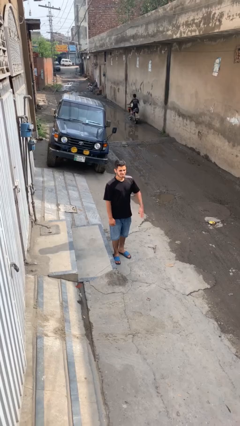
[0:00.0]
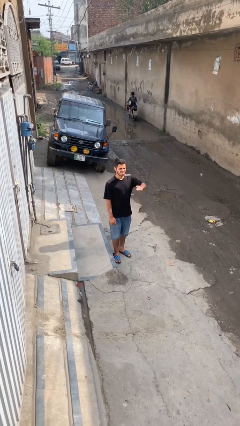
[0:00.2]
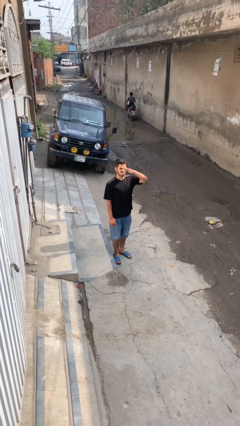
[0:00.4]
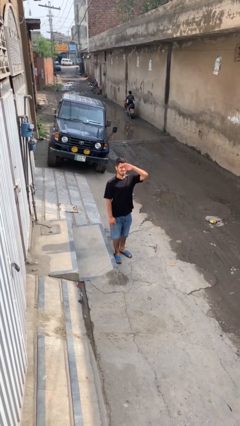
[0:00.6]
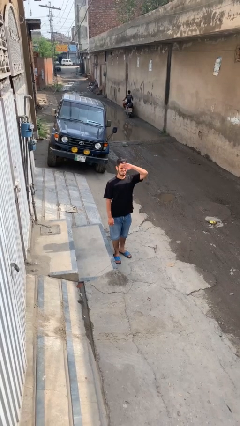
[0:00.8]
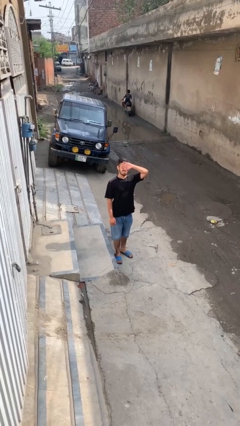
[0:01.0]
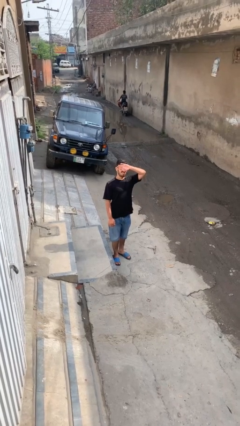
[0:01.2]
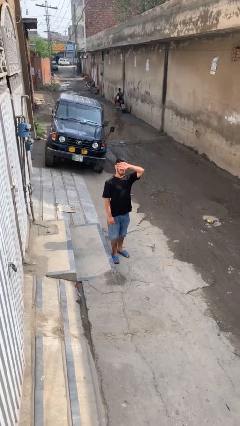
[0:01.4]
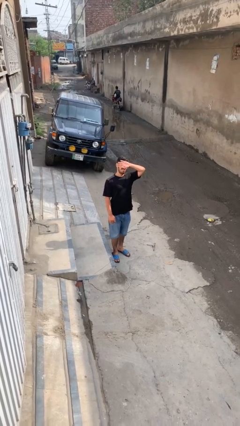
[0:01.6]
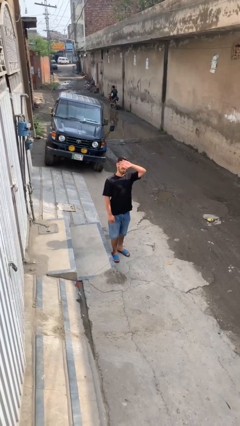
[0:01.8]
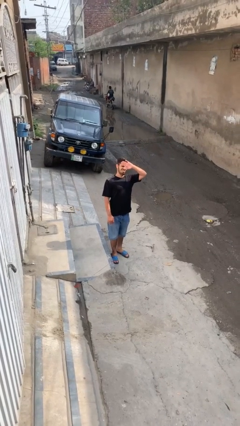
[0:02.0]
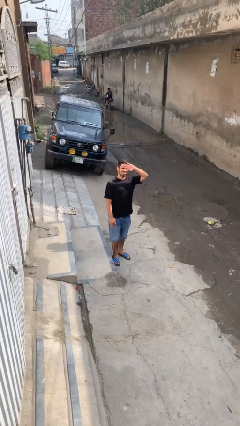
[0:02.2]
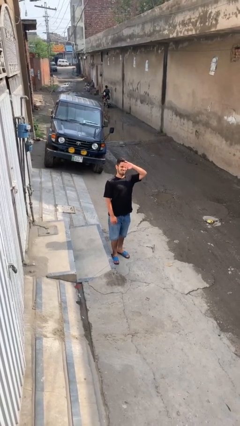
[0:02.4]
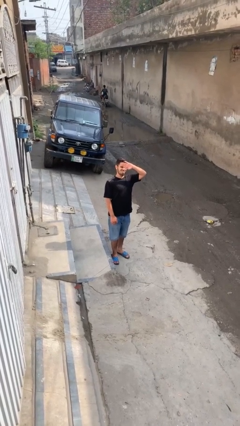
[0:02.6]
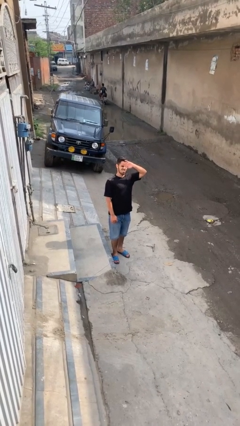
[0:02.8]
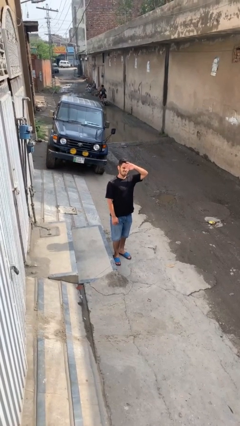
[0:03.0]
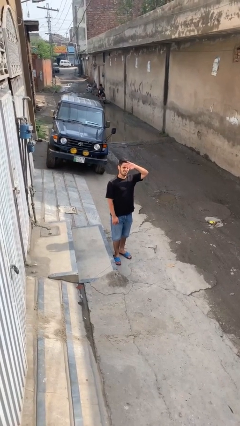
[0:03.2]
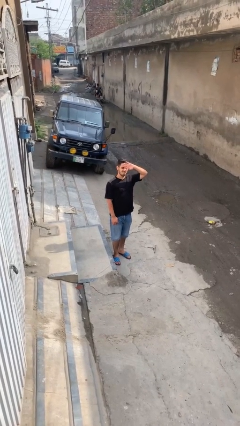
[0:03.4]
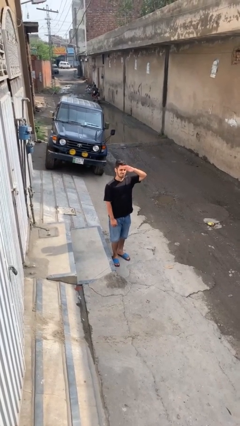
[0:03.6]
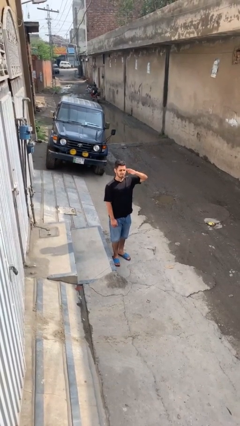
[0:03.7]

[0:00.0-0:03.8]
person shades eyes

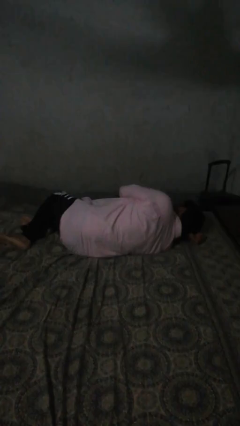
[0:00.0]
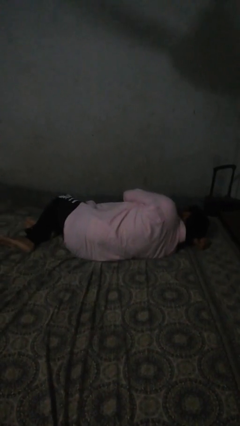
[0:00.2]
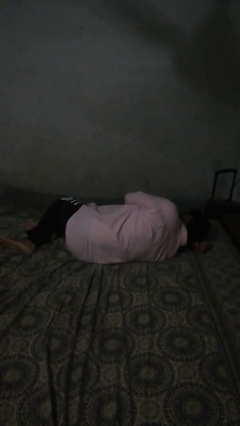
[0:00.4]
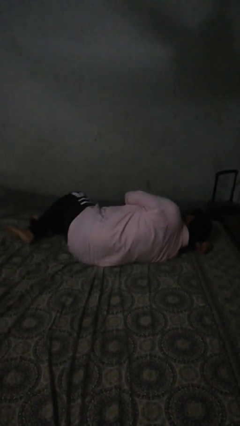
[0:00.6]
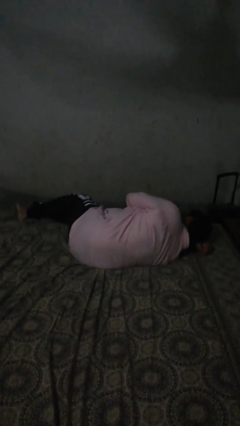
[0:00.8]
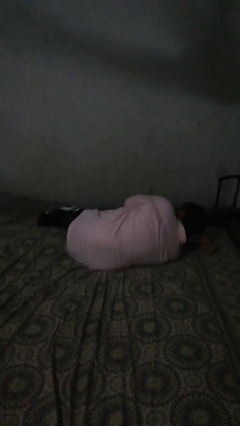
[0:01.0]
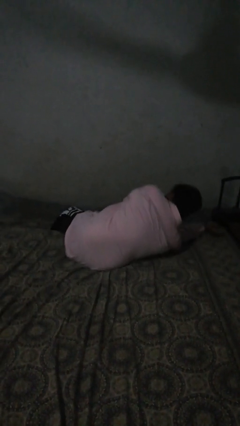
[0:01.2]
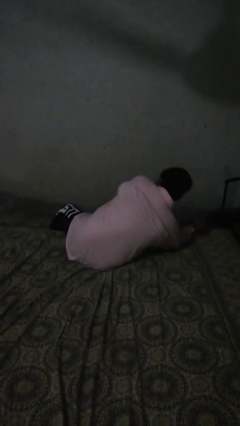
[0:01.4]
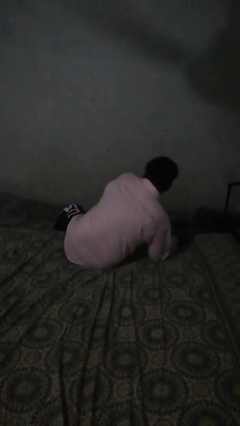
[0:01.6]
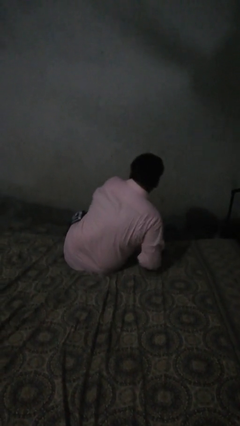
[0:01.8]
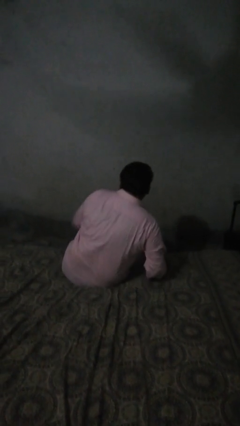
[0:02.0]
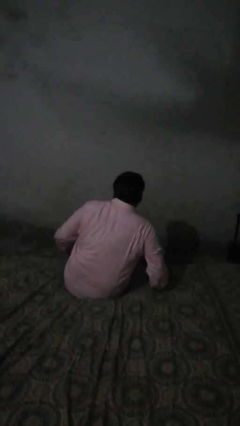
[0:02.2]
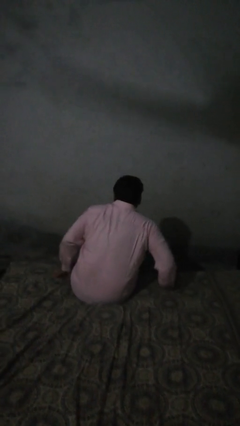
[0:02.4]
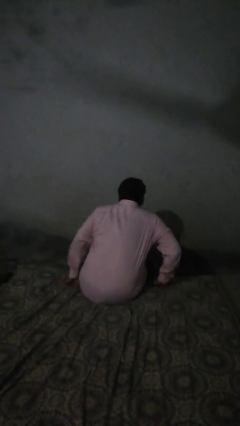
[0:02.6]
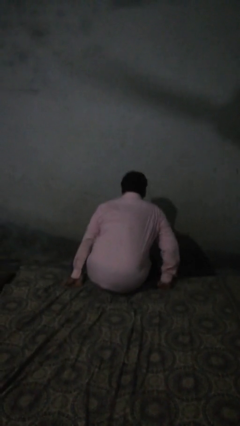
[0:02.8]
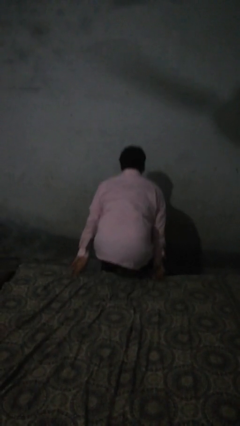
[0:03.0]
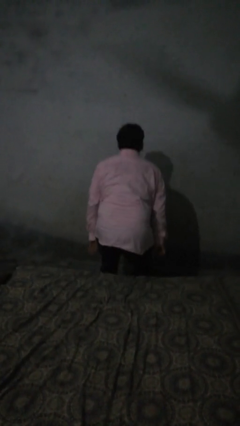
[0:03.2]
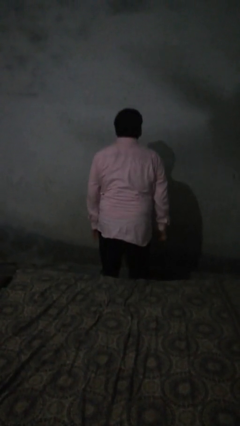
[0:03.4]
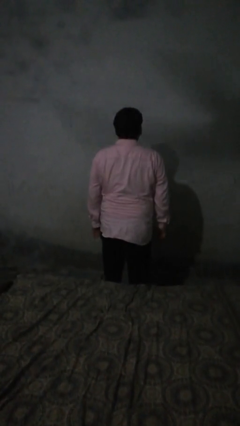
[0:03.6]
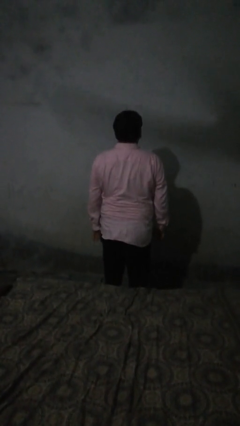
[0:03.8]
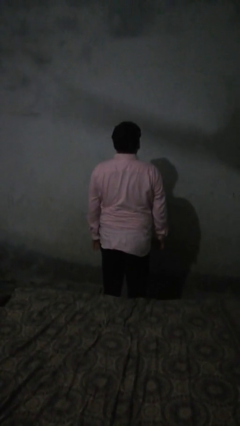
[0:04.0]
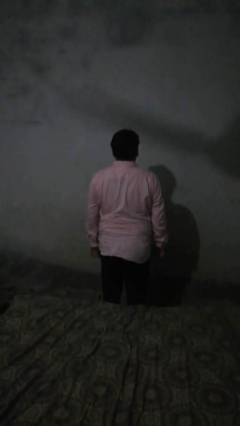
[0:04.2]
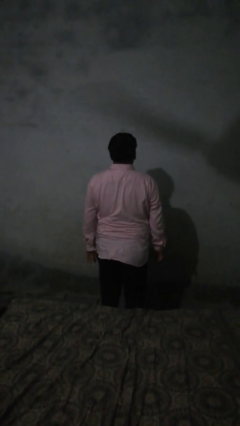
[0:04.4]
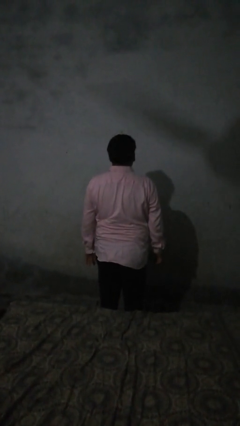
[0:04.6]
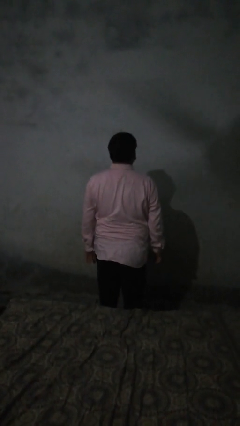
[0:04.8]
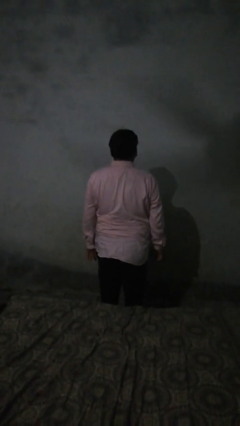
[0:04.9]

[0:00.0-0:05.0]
person stands up

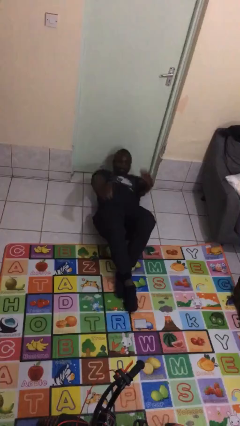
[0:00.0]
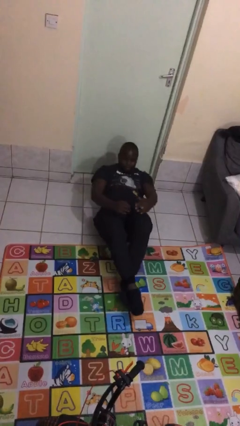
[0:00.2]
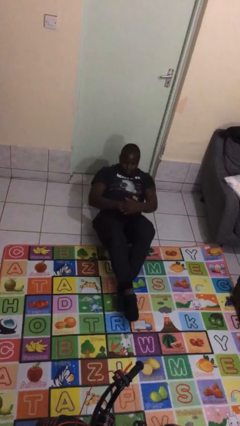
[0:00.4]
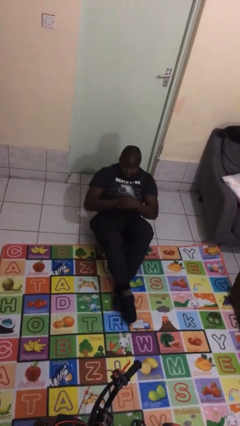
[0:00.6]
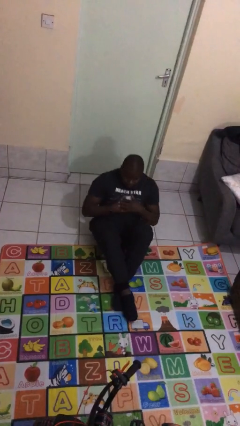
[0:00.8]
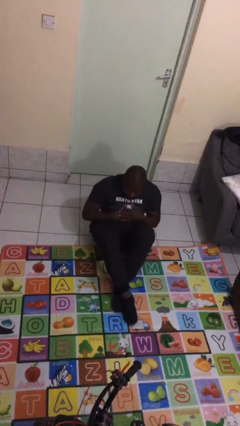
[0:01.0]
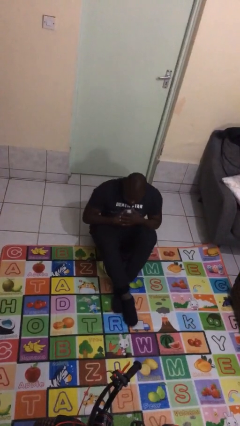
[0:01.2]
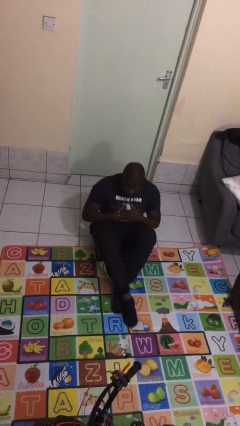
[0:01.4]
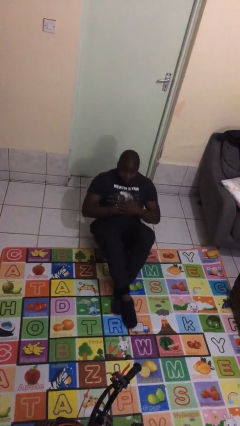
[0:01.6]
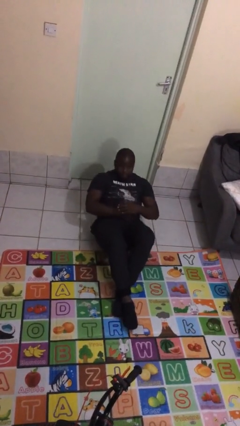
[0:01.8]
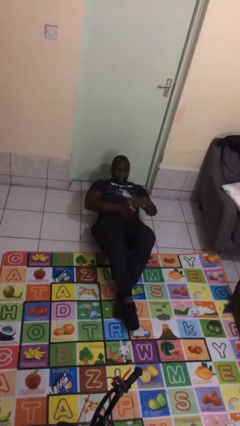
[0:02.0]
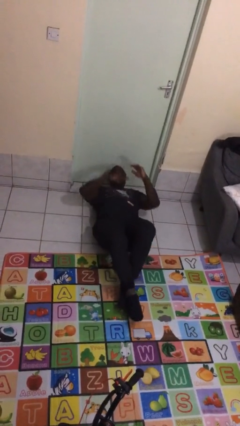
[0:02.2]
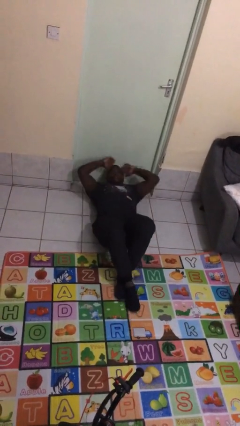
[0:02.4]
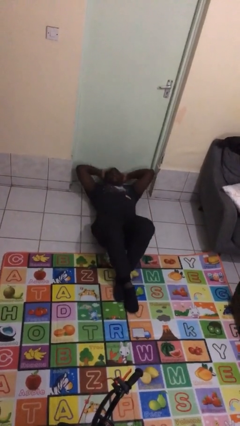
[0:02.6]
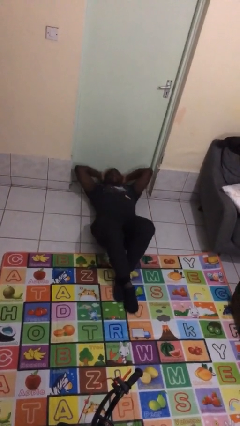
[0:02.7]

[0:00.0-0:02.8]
person exercises with situp

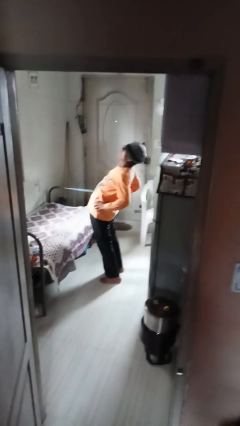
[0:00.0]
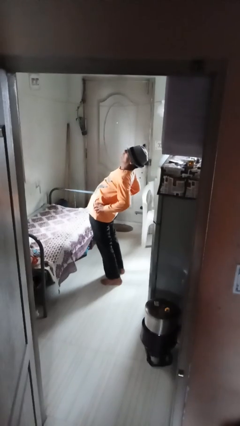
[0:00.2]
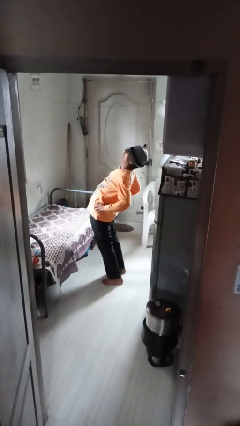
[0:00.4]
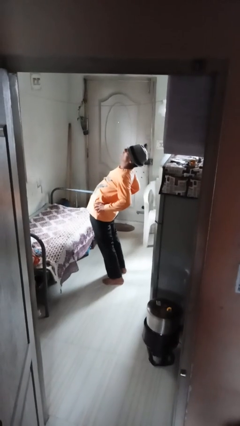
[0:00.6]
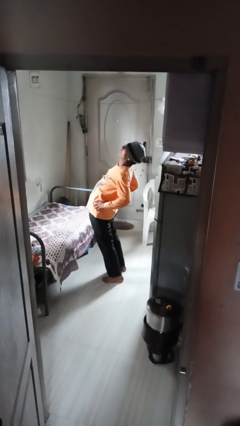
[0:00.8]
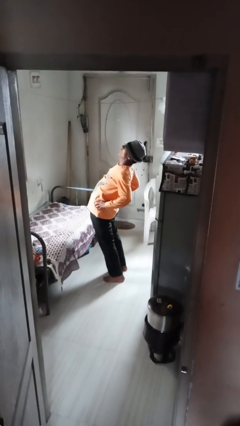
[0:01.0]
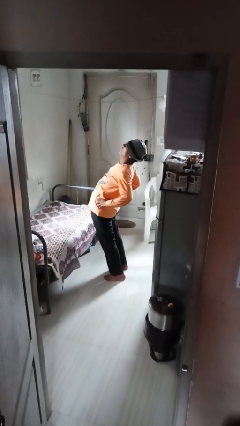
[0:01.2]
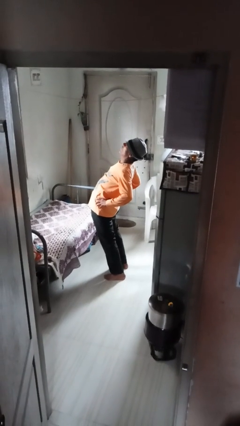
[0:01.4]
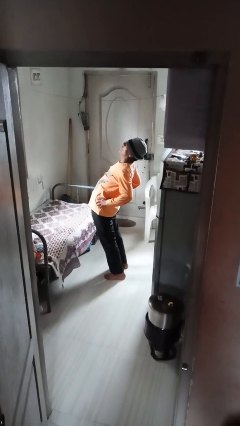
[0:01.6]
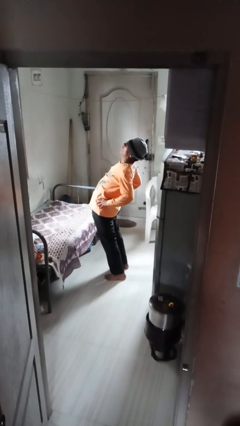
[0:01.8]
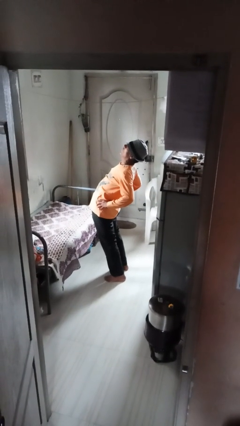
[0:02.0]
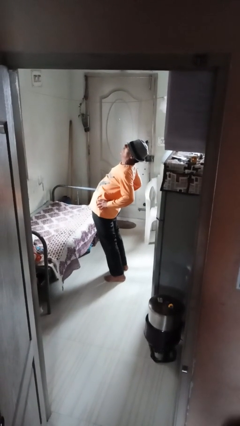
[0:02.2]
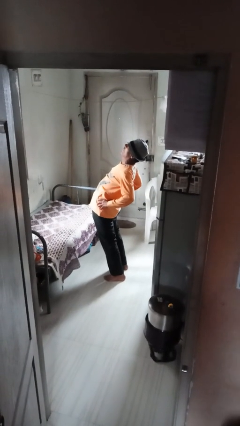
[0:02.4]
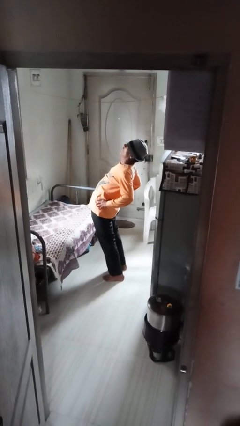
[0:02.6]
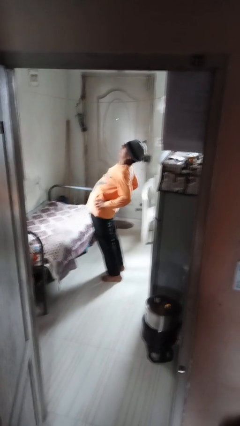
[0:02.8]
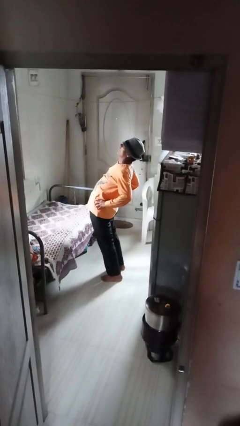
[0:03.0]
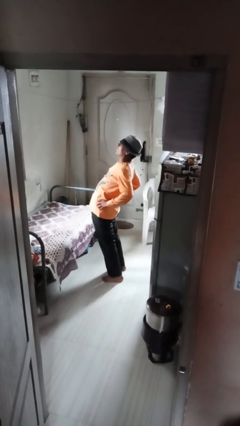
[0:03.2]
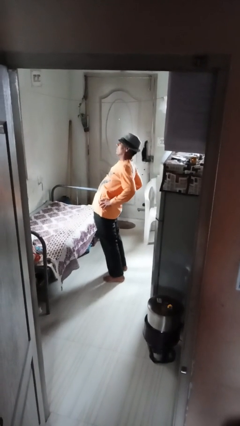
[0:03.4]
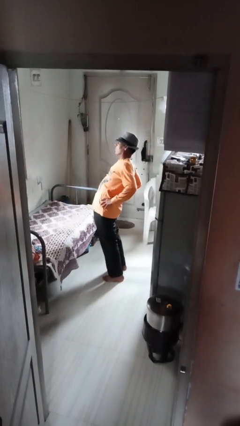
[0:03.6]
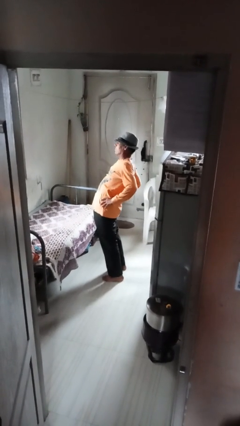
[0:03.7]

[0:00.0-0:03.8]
person stretches back

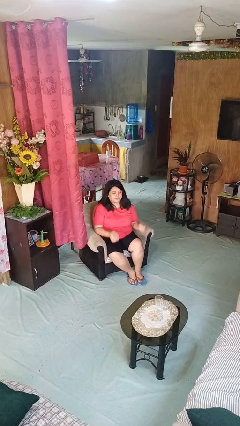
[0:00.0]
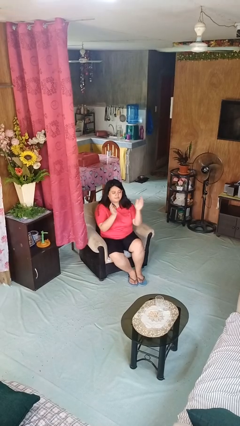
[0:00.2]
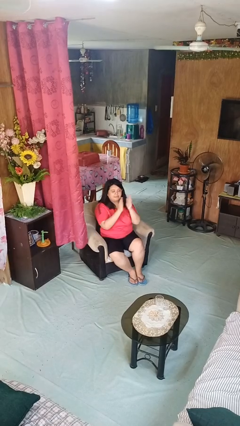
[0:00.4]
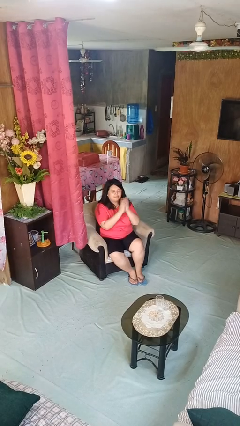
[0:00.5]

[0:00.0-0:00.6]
person claps hands

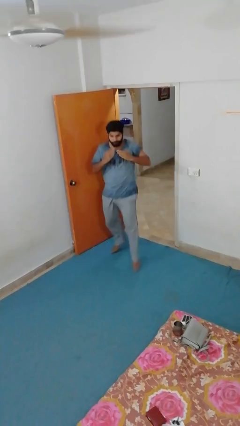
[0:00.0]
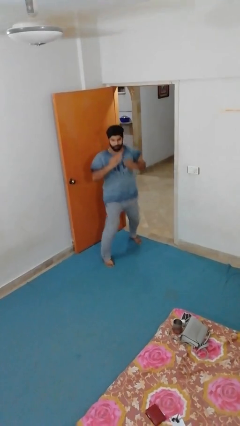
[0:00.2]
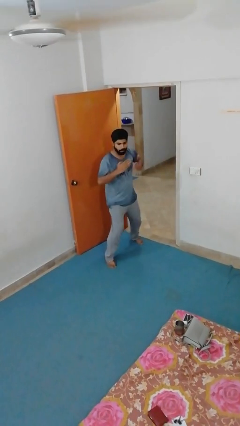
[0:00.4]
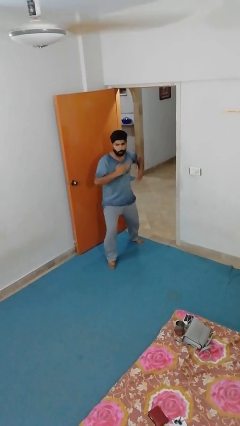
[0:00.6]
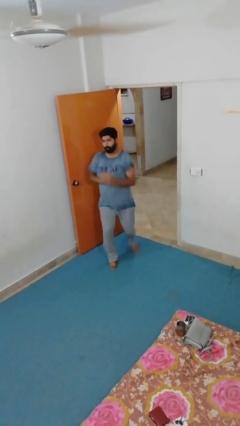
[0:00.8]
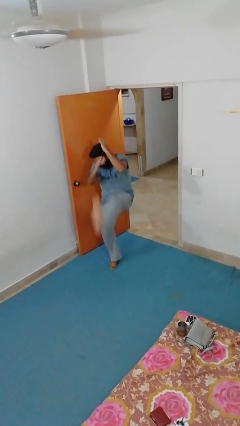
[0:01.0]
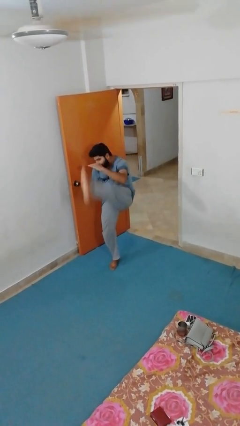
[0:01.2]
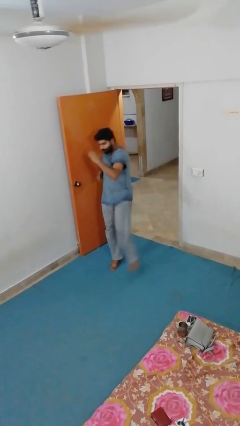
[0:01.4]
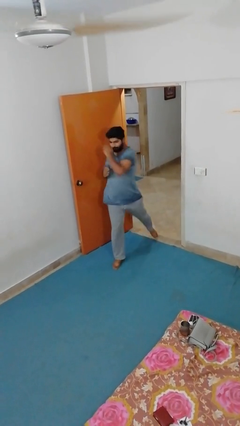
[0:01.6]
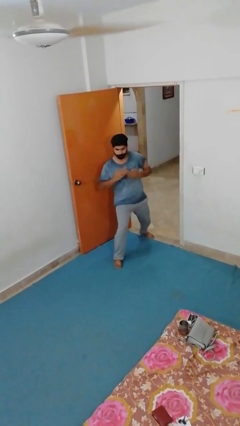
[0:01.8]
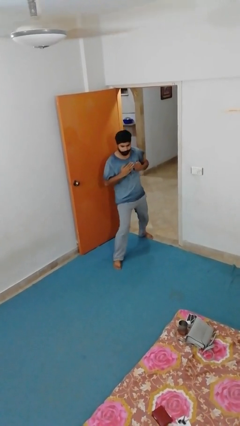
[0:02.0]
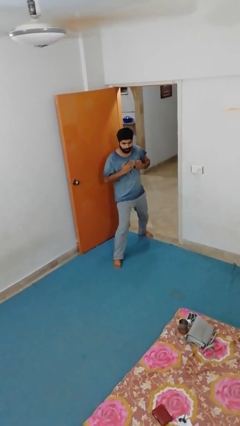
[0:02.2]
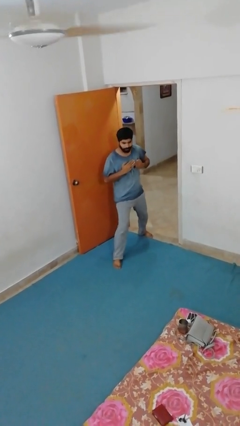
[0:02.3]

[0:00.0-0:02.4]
person karate kicks
